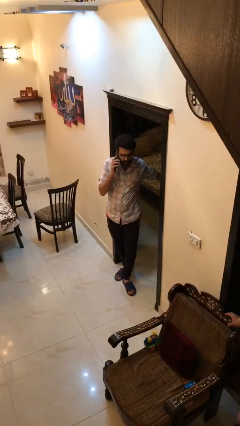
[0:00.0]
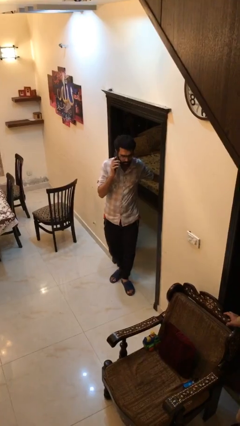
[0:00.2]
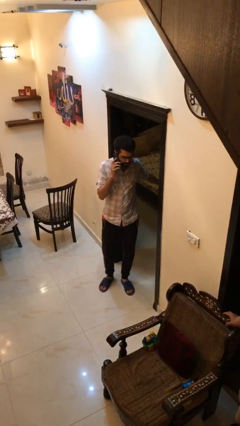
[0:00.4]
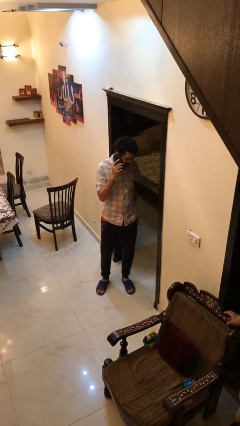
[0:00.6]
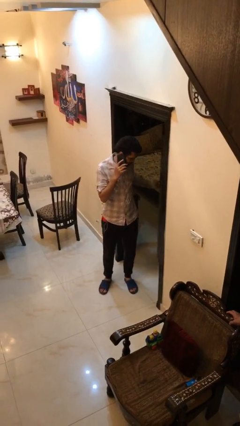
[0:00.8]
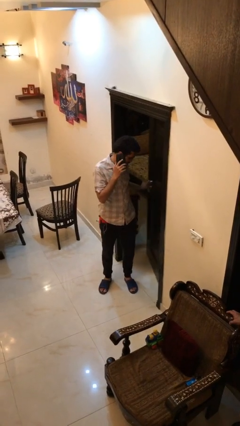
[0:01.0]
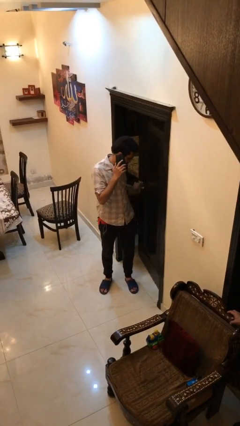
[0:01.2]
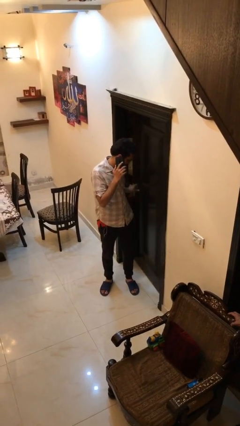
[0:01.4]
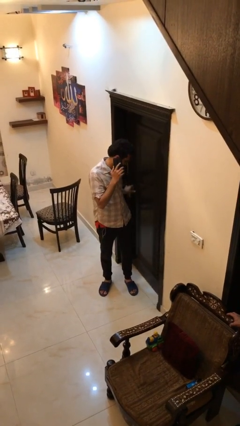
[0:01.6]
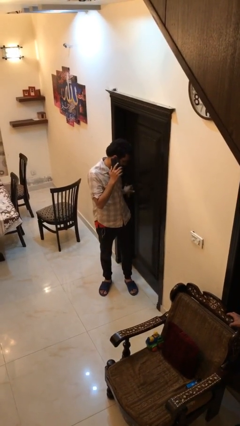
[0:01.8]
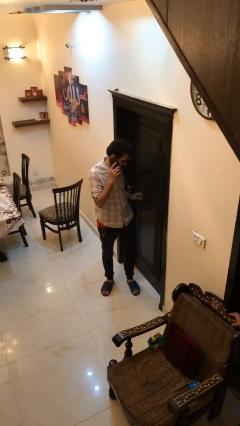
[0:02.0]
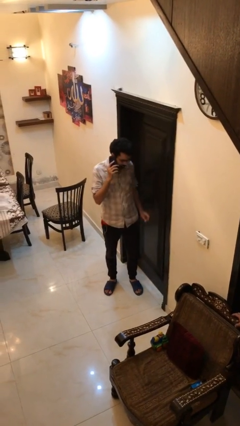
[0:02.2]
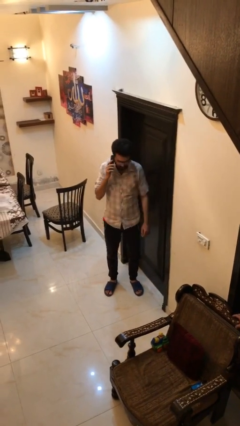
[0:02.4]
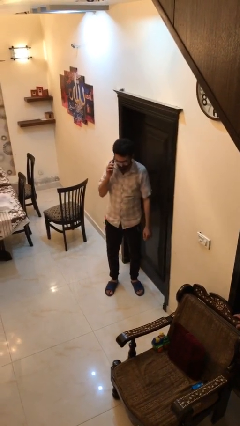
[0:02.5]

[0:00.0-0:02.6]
person closes facility door

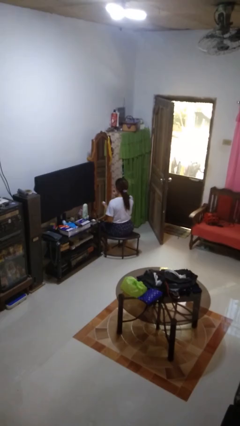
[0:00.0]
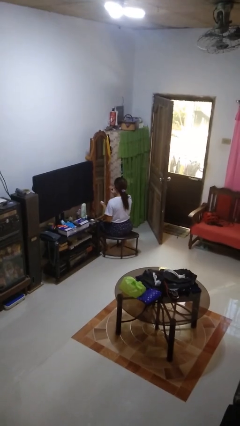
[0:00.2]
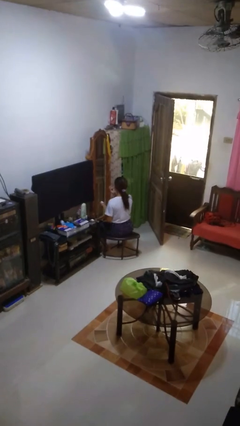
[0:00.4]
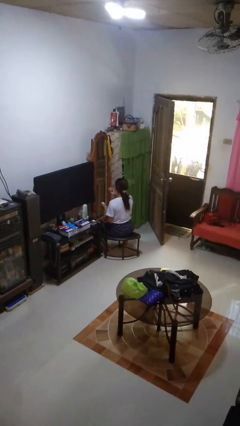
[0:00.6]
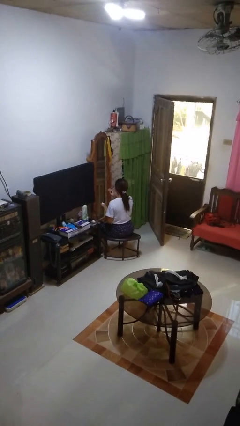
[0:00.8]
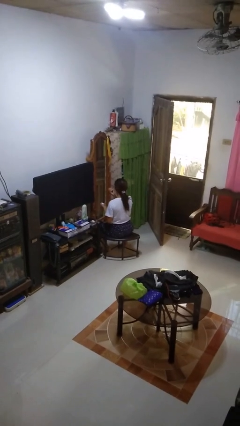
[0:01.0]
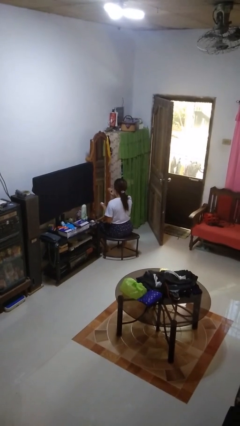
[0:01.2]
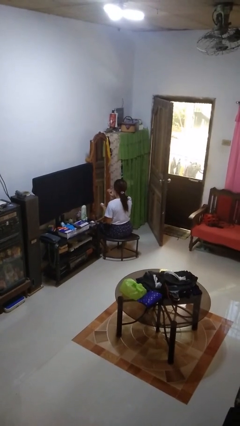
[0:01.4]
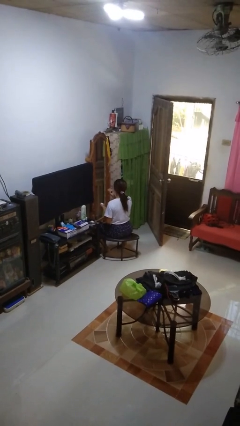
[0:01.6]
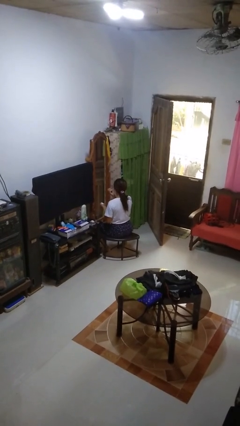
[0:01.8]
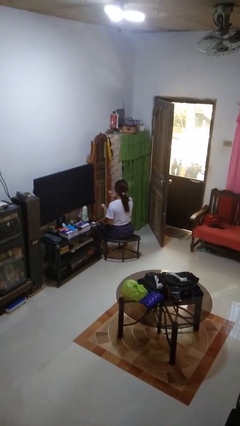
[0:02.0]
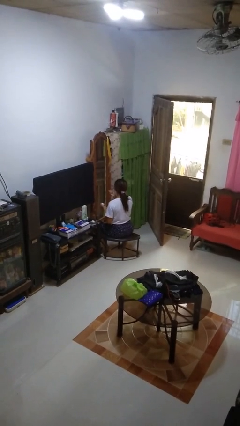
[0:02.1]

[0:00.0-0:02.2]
person applies eye makeup

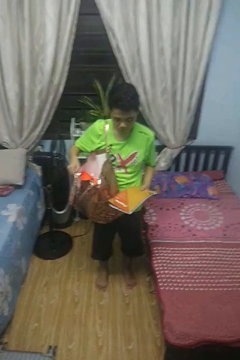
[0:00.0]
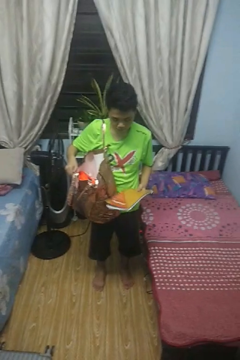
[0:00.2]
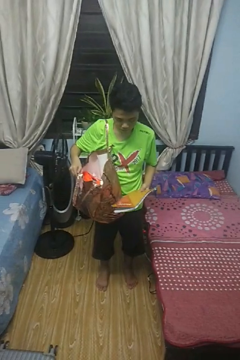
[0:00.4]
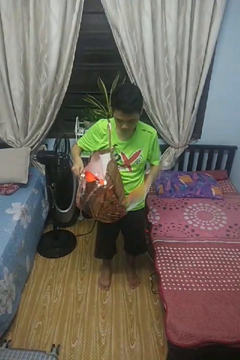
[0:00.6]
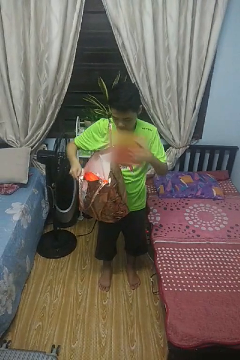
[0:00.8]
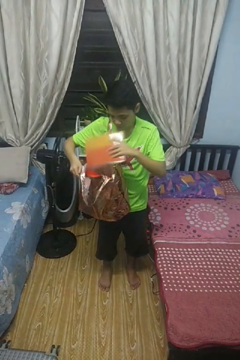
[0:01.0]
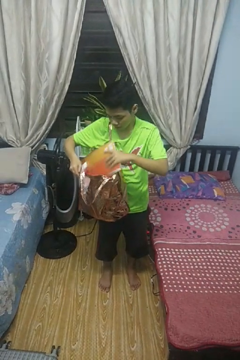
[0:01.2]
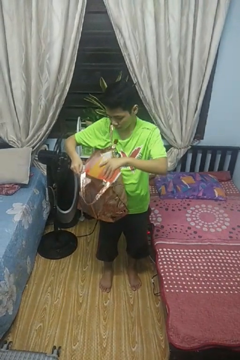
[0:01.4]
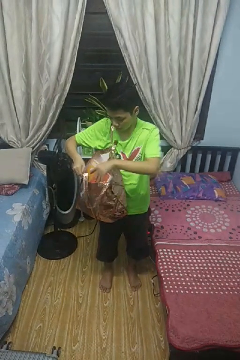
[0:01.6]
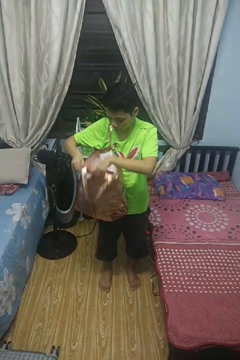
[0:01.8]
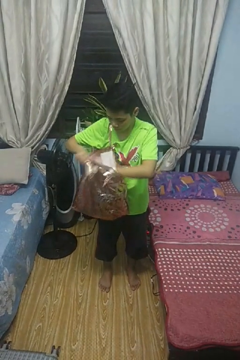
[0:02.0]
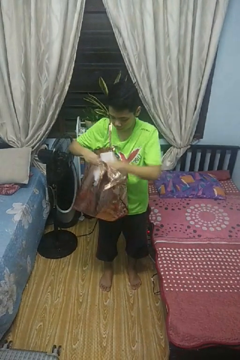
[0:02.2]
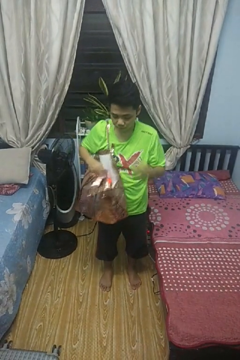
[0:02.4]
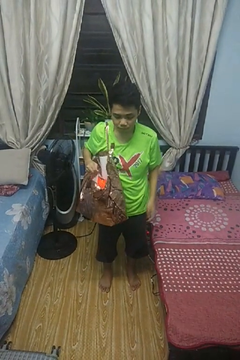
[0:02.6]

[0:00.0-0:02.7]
person puts object into bag

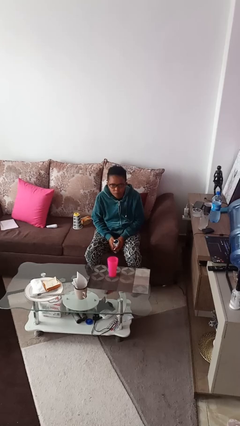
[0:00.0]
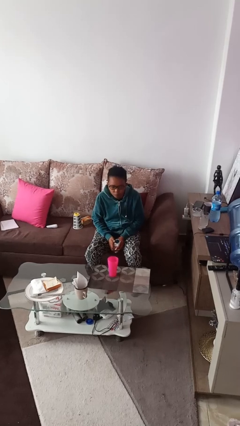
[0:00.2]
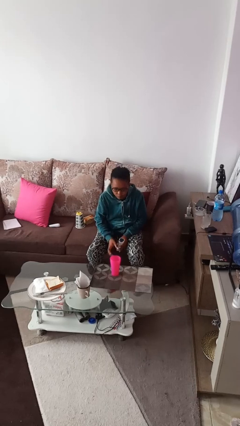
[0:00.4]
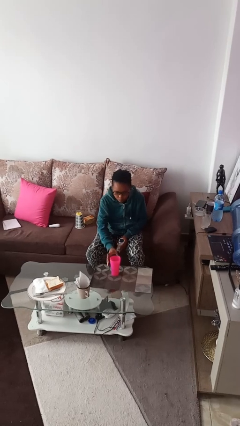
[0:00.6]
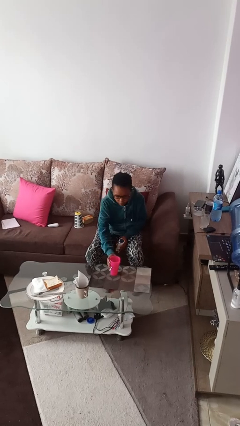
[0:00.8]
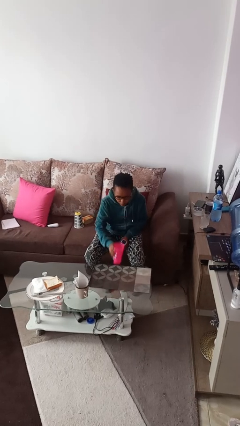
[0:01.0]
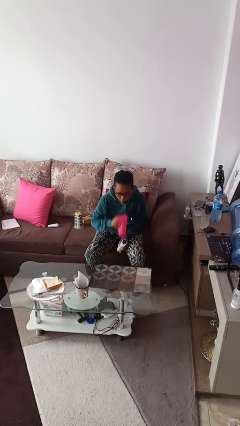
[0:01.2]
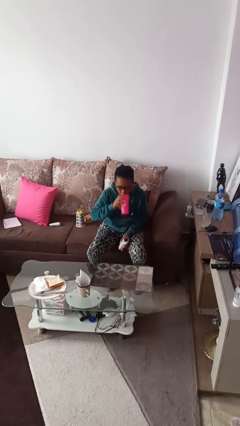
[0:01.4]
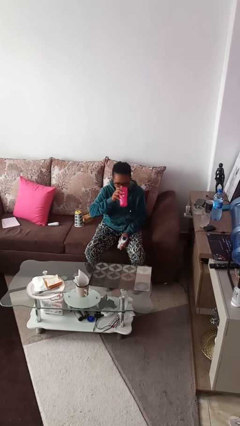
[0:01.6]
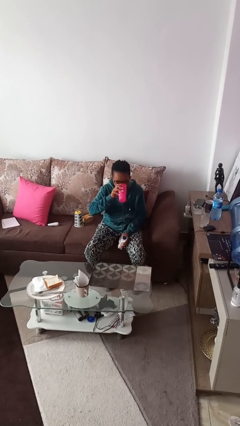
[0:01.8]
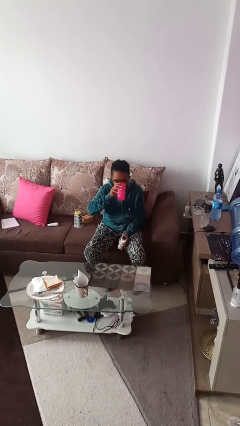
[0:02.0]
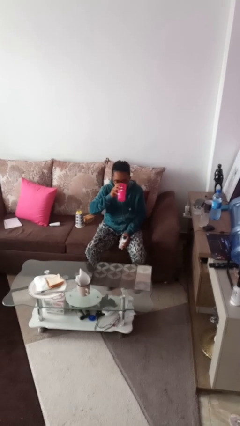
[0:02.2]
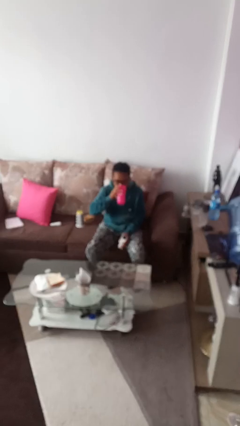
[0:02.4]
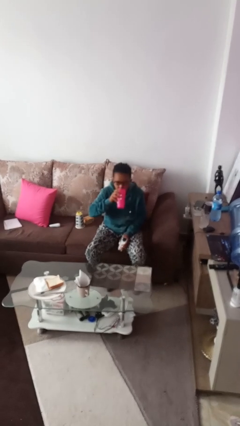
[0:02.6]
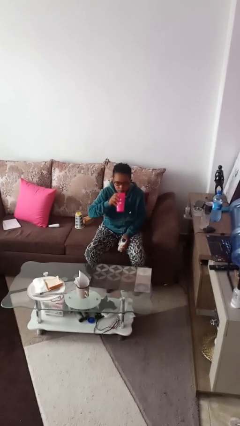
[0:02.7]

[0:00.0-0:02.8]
person drinks from cup

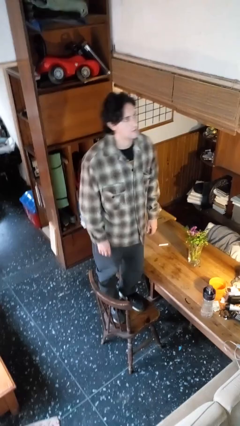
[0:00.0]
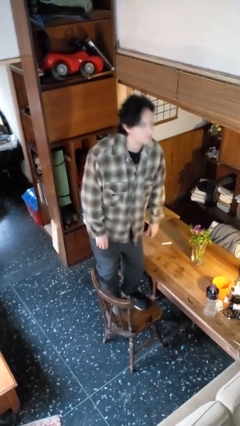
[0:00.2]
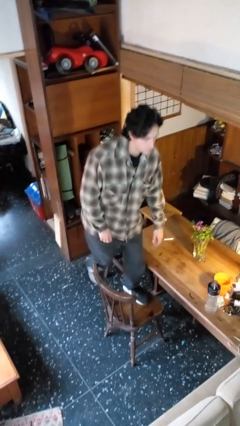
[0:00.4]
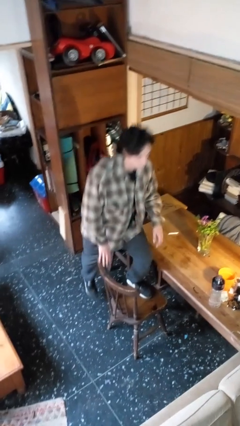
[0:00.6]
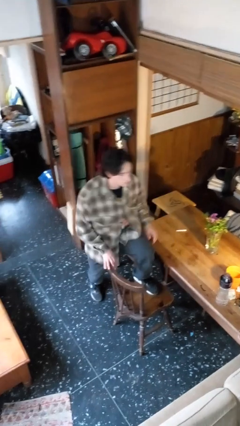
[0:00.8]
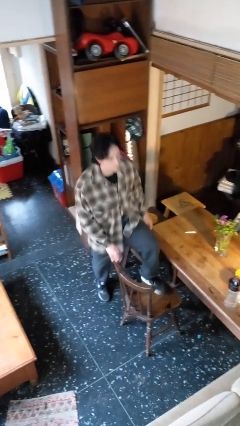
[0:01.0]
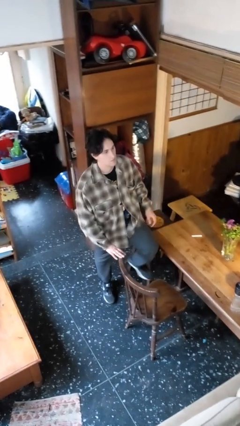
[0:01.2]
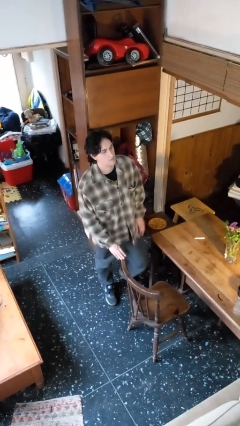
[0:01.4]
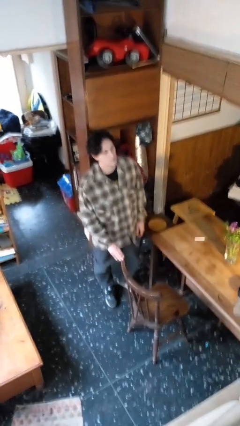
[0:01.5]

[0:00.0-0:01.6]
person climbs off chair

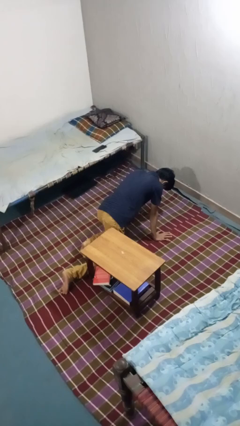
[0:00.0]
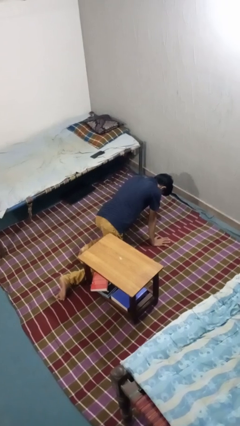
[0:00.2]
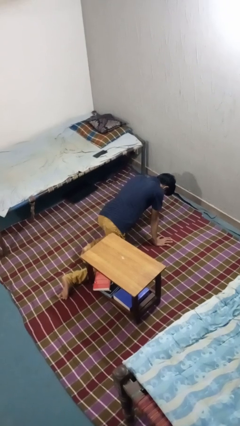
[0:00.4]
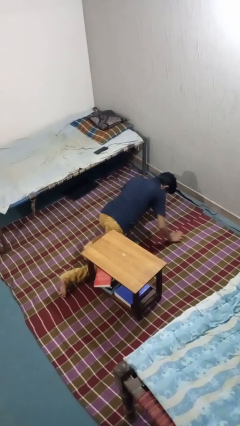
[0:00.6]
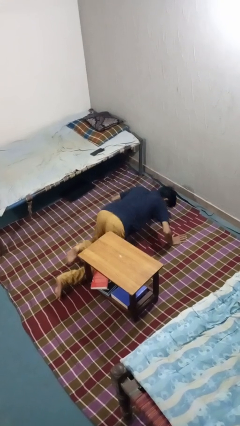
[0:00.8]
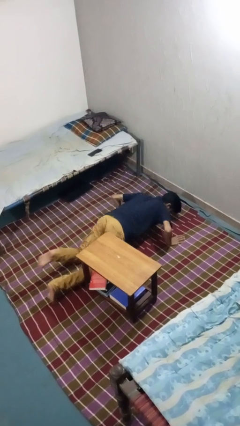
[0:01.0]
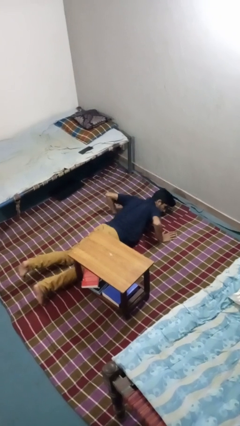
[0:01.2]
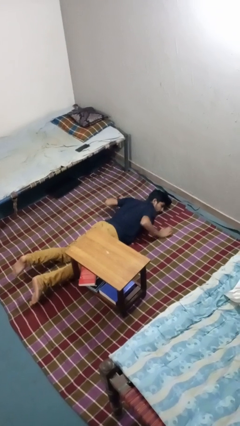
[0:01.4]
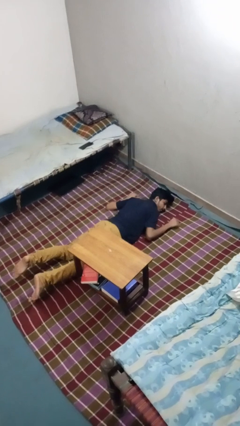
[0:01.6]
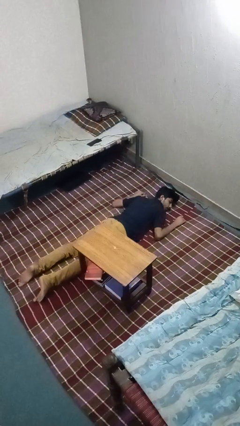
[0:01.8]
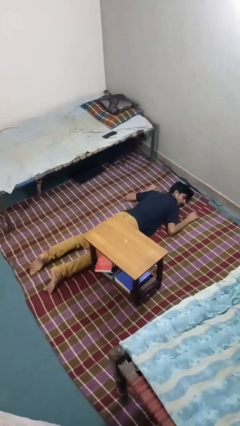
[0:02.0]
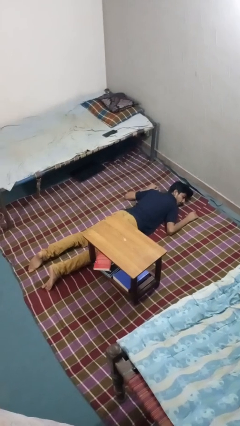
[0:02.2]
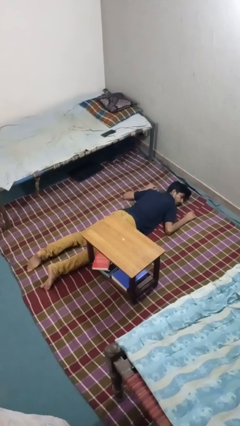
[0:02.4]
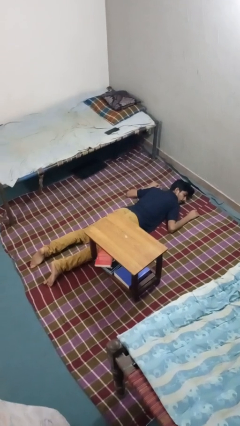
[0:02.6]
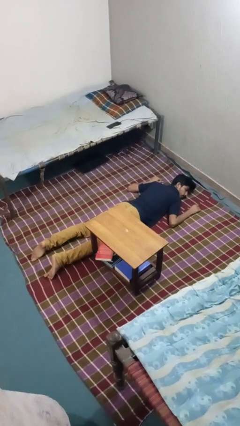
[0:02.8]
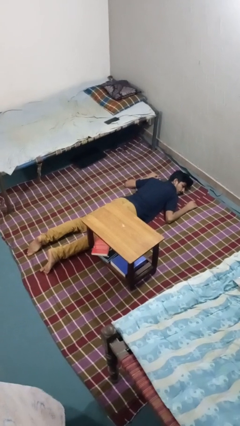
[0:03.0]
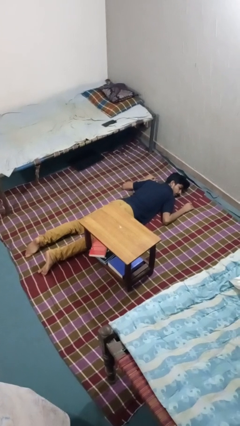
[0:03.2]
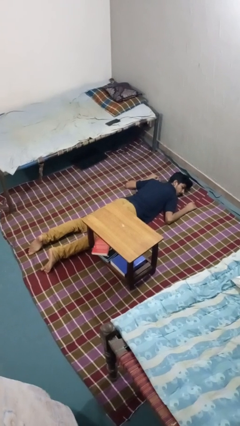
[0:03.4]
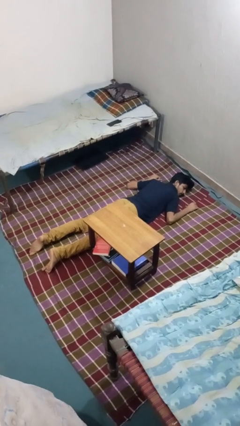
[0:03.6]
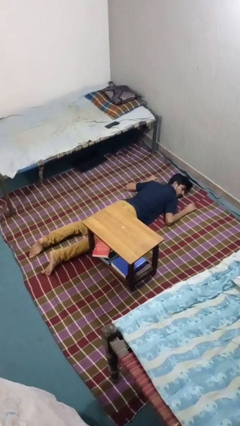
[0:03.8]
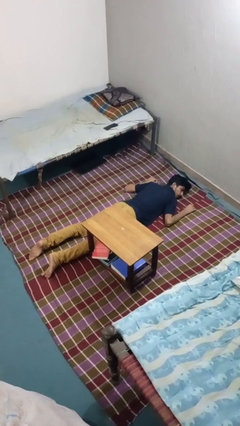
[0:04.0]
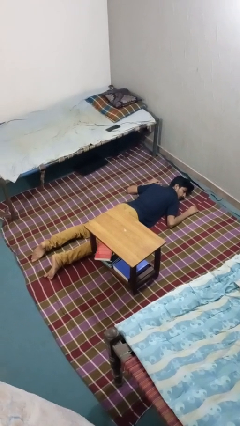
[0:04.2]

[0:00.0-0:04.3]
person lies down on floor

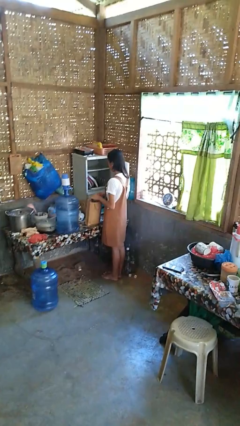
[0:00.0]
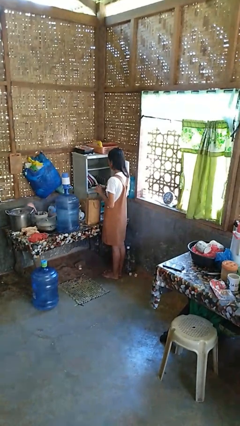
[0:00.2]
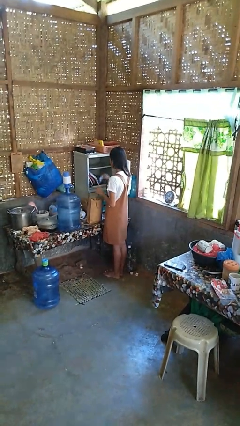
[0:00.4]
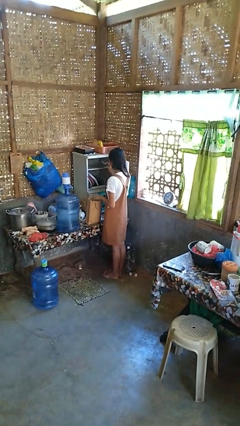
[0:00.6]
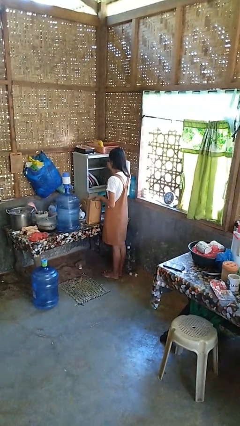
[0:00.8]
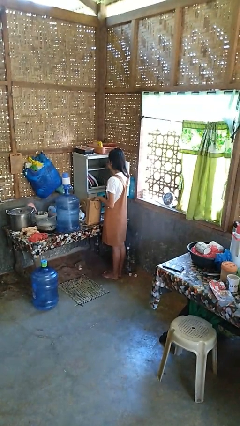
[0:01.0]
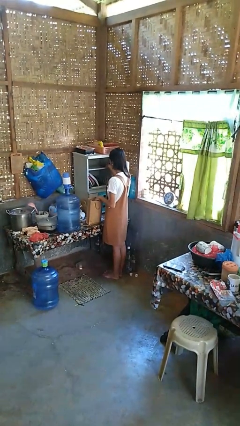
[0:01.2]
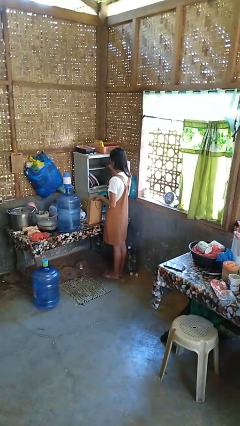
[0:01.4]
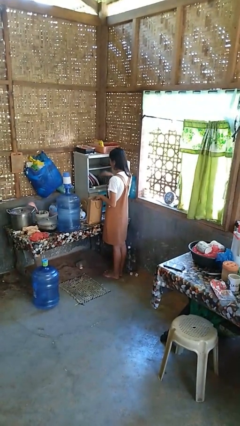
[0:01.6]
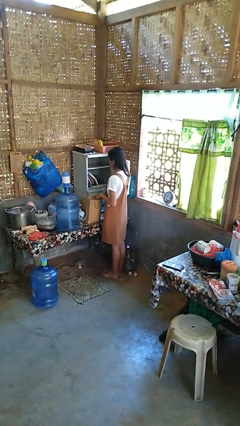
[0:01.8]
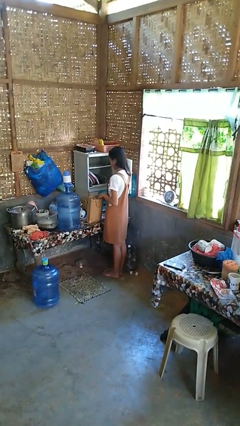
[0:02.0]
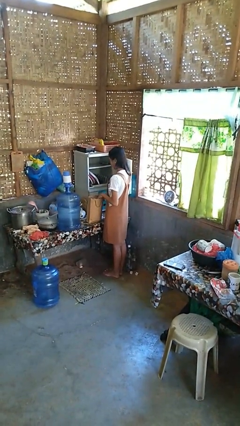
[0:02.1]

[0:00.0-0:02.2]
person loads groceries into cabinet
